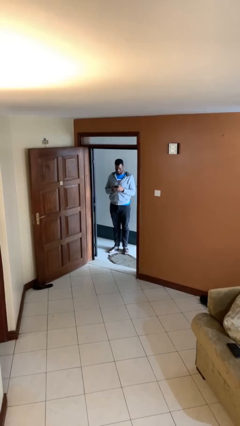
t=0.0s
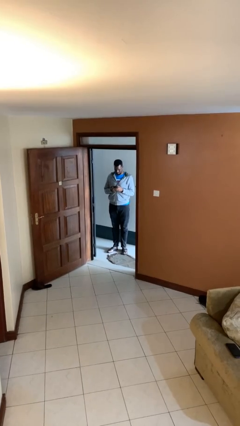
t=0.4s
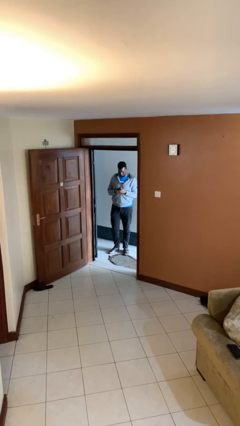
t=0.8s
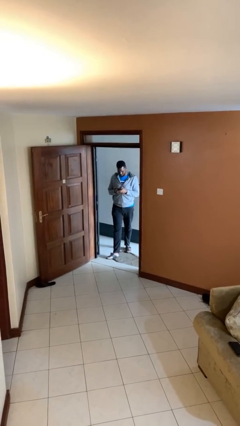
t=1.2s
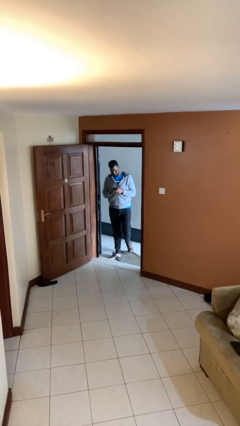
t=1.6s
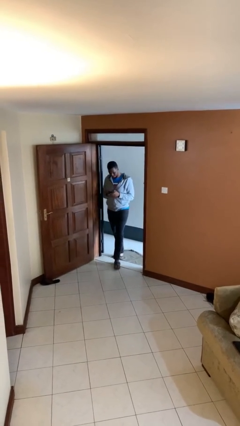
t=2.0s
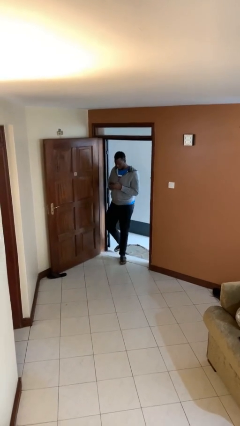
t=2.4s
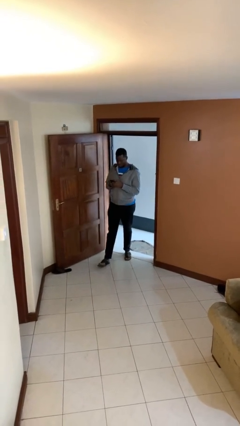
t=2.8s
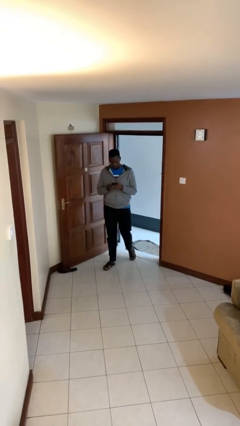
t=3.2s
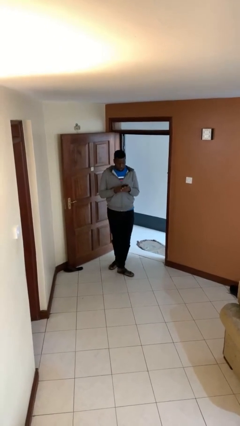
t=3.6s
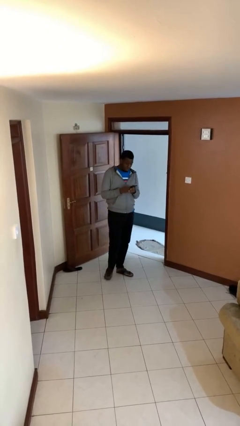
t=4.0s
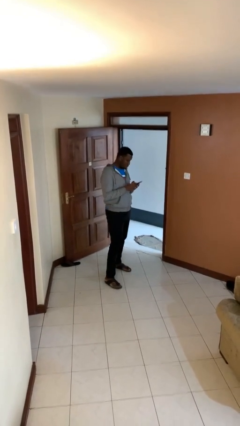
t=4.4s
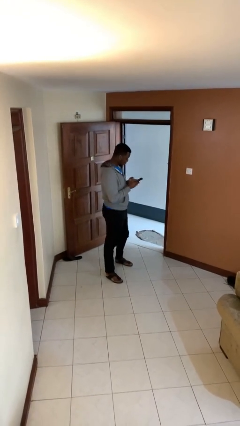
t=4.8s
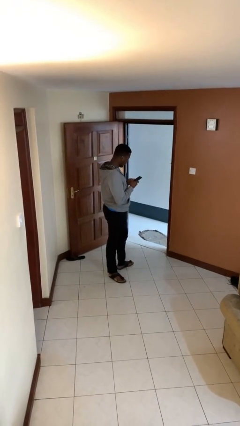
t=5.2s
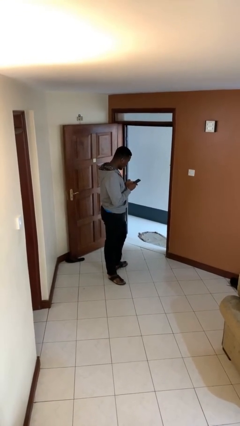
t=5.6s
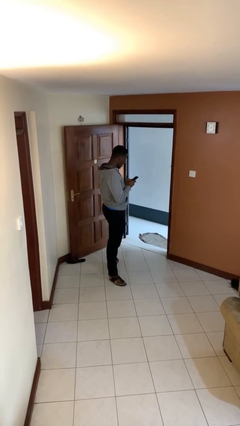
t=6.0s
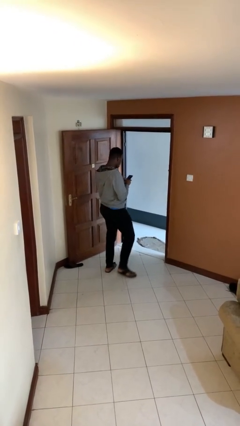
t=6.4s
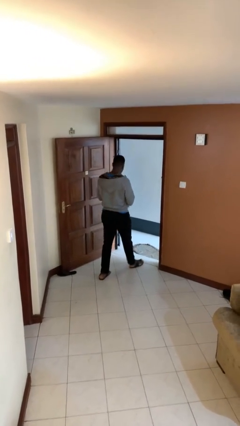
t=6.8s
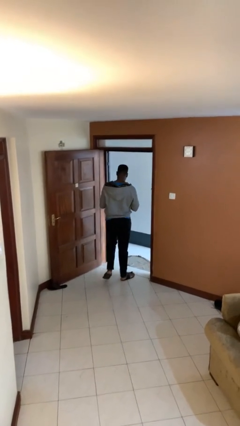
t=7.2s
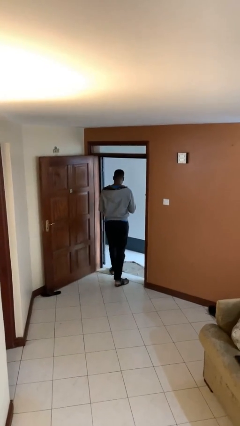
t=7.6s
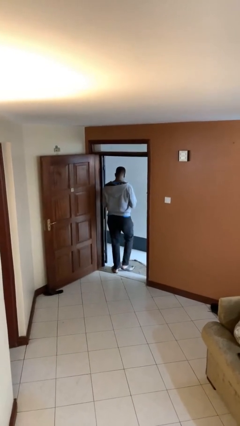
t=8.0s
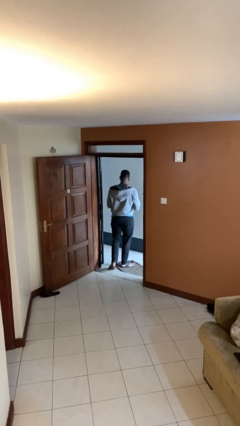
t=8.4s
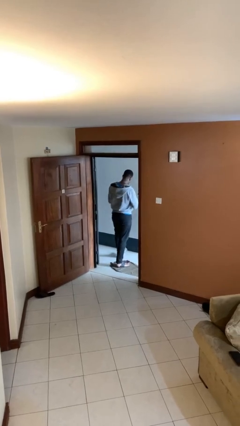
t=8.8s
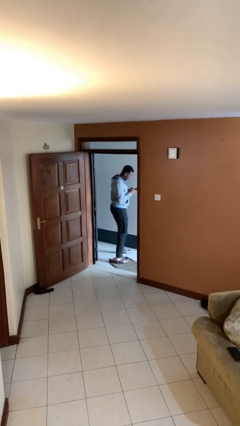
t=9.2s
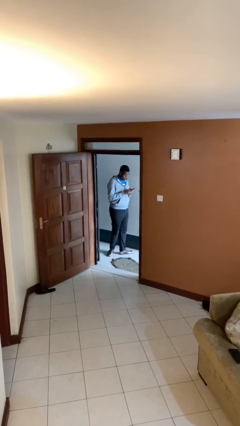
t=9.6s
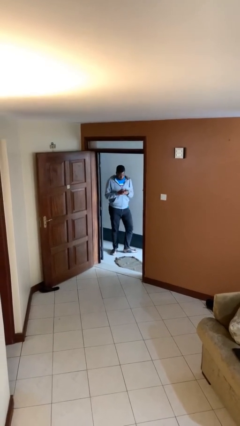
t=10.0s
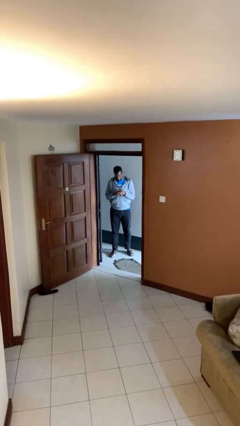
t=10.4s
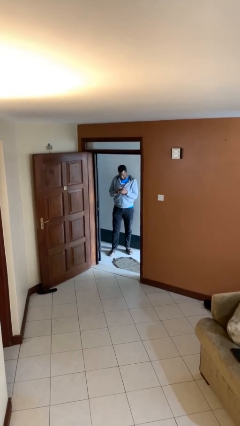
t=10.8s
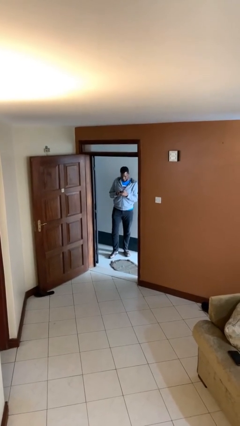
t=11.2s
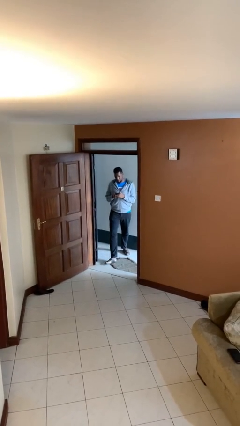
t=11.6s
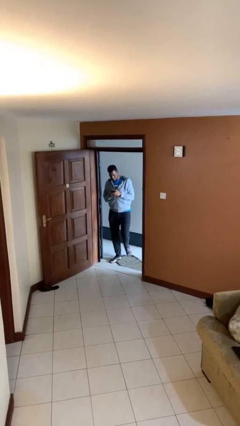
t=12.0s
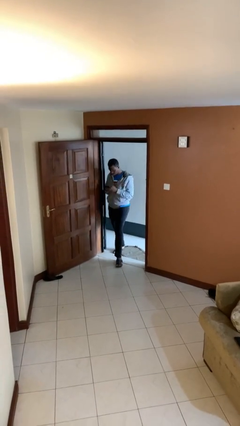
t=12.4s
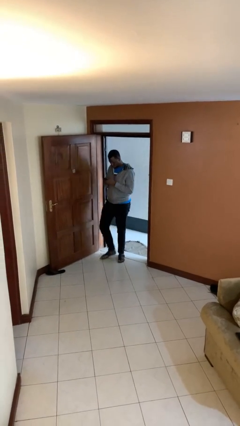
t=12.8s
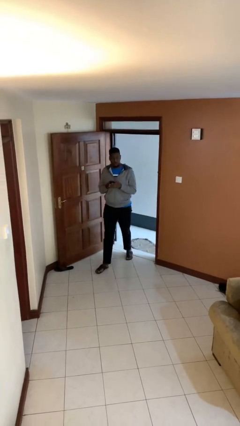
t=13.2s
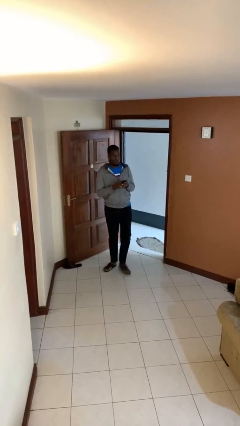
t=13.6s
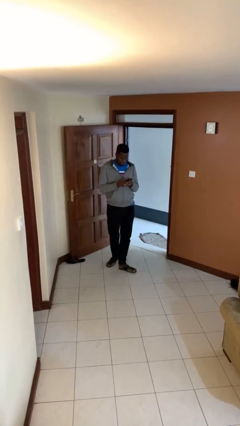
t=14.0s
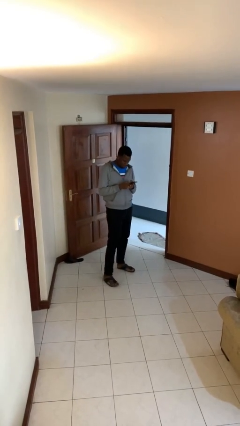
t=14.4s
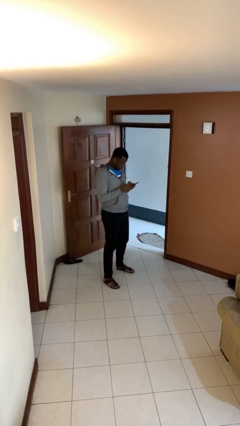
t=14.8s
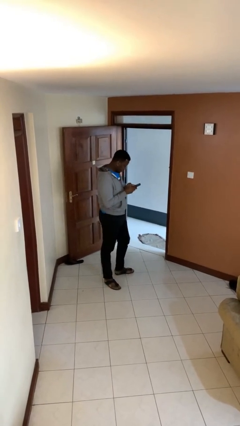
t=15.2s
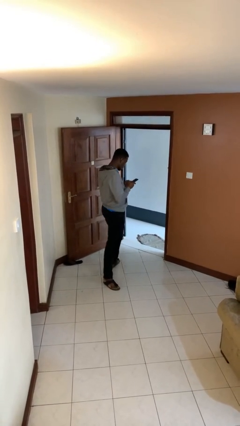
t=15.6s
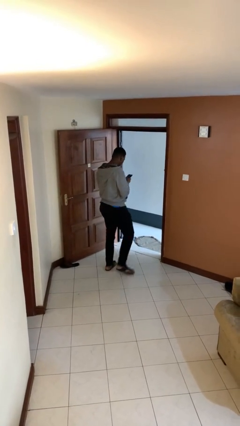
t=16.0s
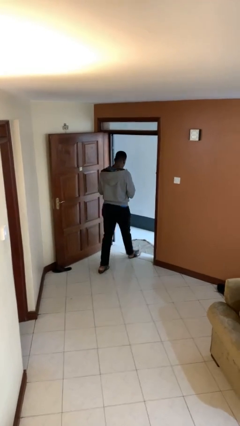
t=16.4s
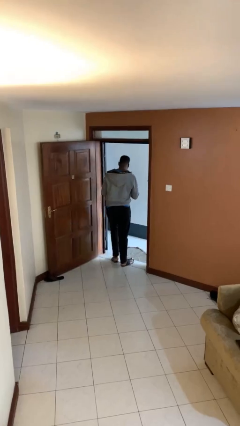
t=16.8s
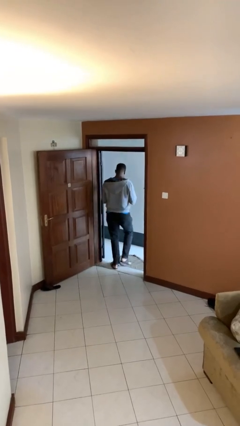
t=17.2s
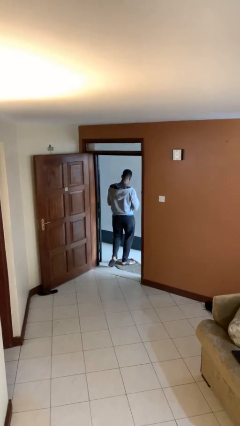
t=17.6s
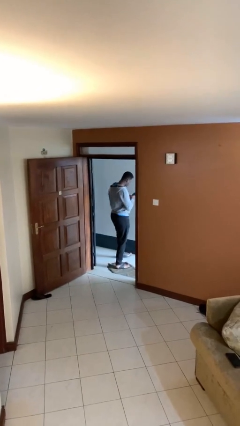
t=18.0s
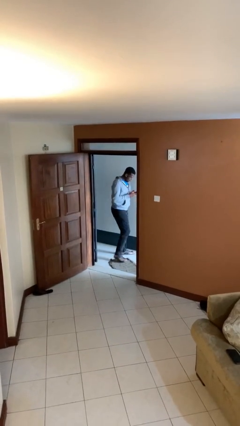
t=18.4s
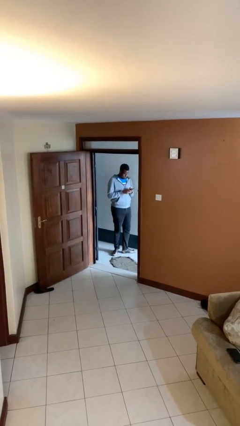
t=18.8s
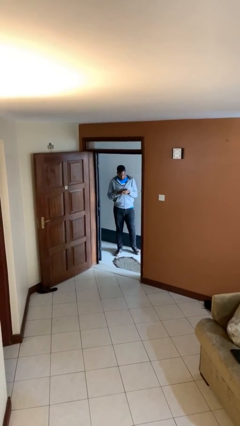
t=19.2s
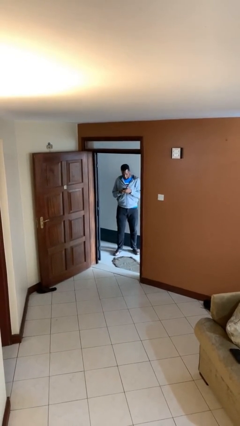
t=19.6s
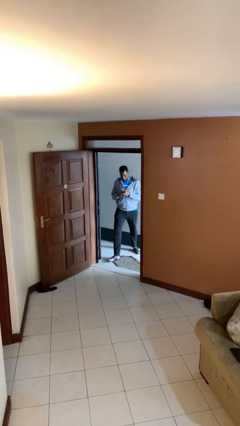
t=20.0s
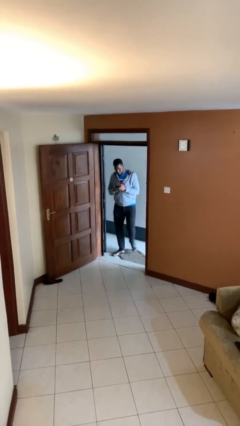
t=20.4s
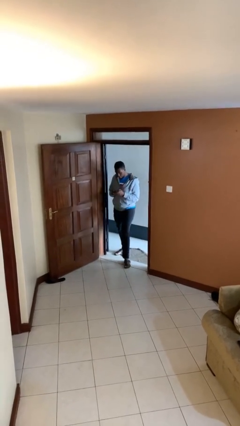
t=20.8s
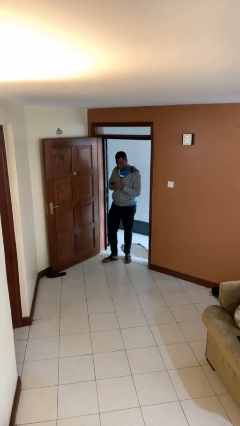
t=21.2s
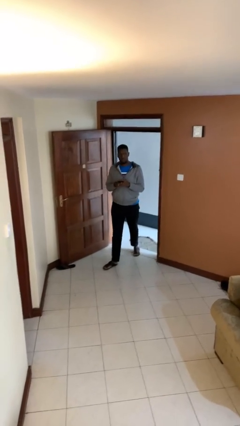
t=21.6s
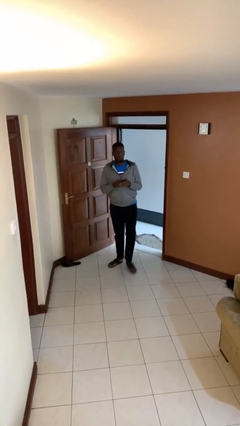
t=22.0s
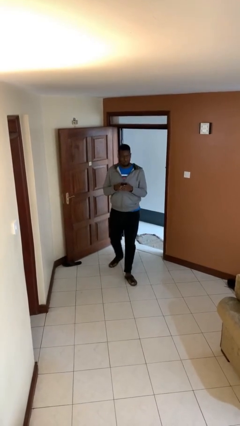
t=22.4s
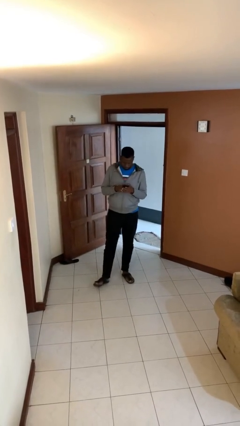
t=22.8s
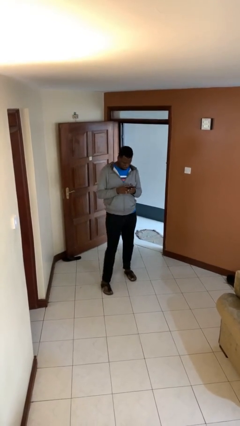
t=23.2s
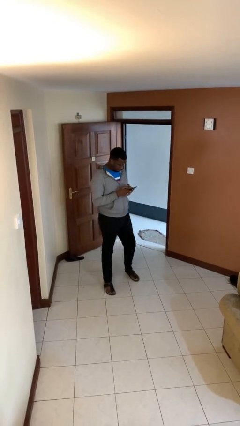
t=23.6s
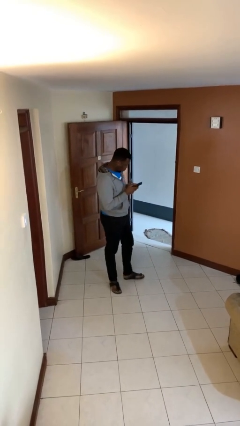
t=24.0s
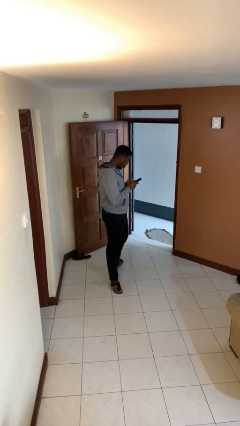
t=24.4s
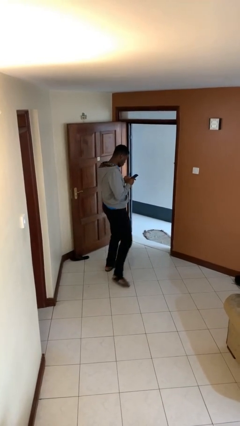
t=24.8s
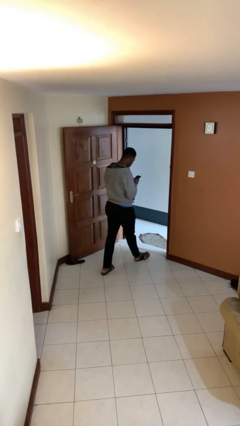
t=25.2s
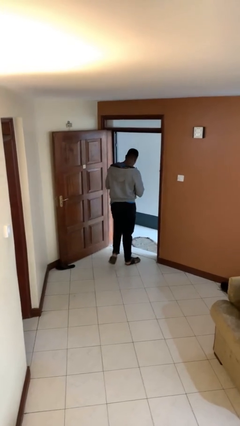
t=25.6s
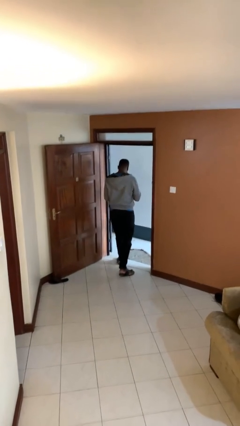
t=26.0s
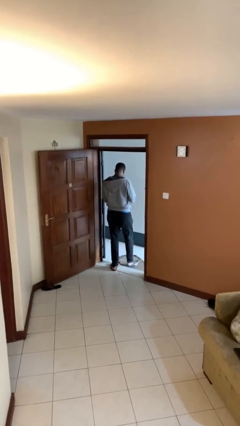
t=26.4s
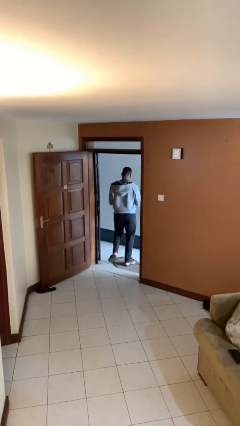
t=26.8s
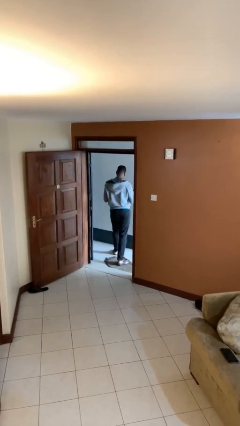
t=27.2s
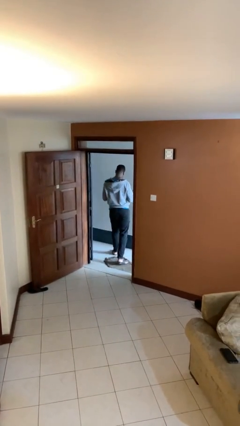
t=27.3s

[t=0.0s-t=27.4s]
person texts on phone

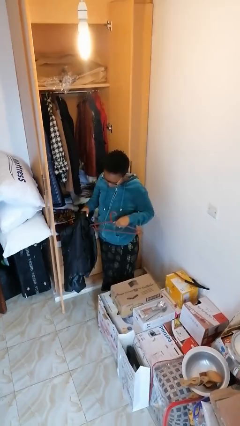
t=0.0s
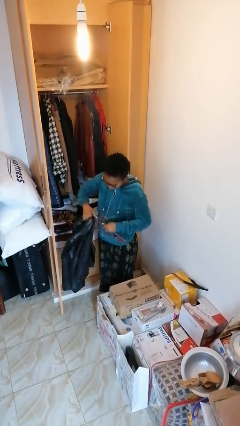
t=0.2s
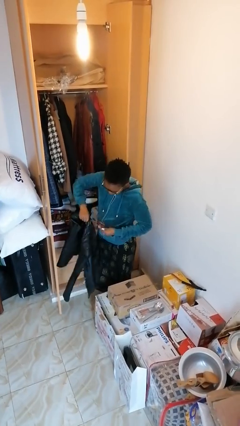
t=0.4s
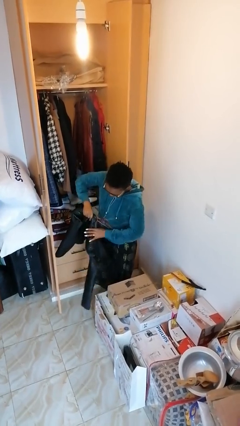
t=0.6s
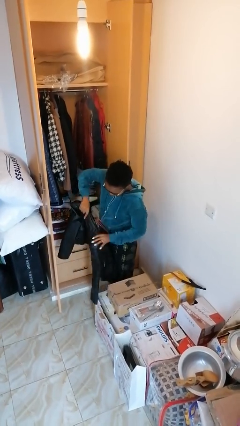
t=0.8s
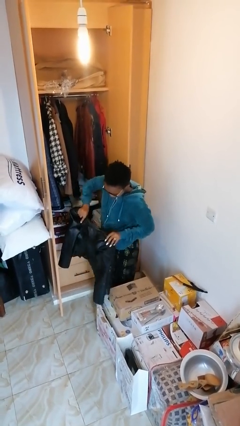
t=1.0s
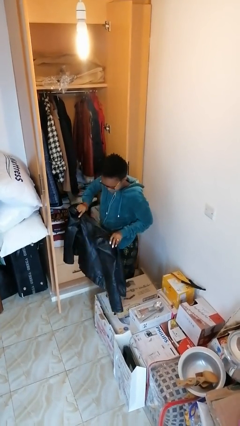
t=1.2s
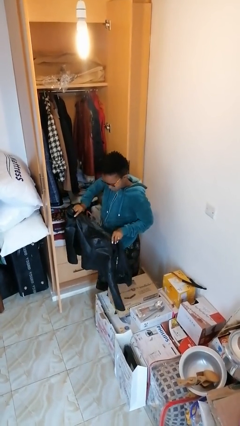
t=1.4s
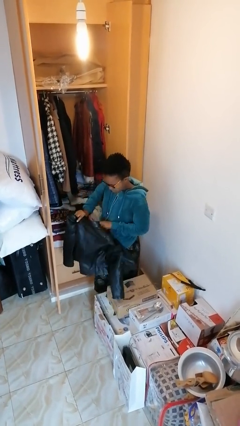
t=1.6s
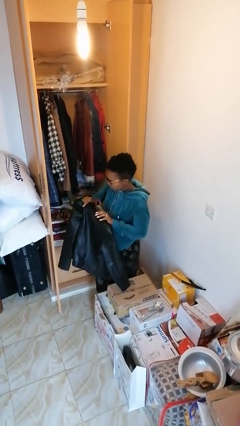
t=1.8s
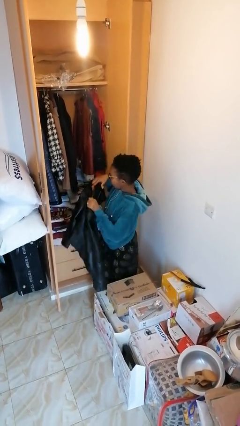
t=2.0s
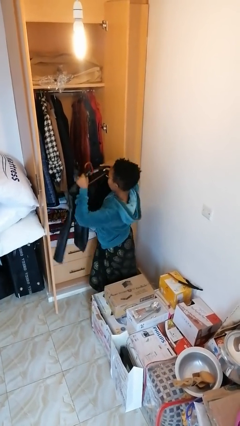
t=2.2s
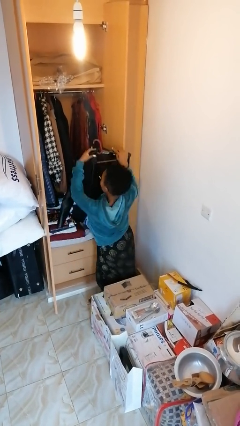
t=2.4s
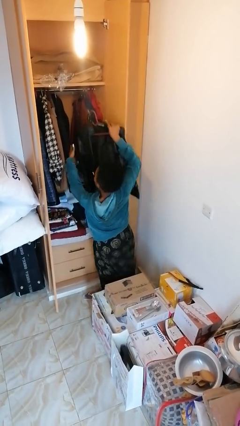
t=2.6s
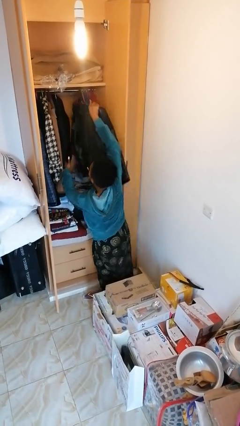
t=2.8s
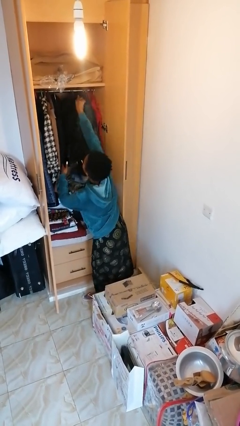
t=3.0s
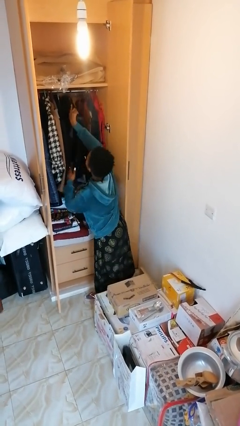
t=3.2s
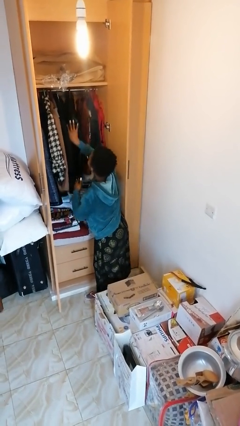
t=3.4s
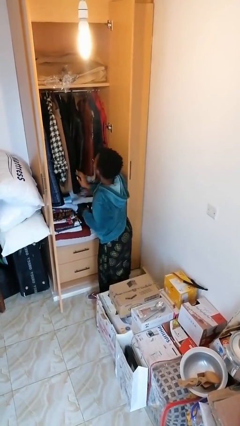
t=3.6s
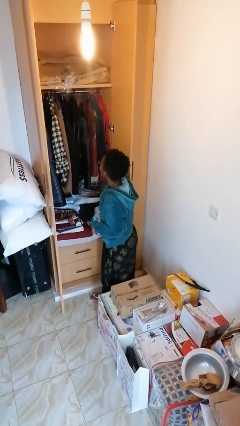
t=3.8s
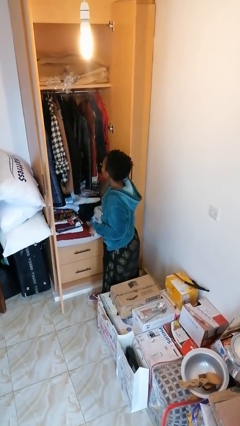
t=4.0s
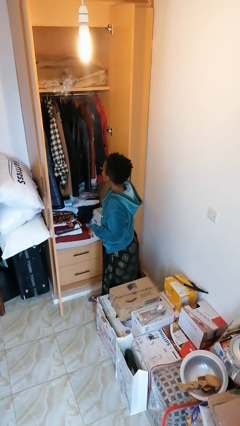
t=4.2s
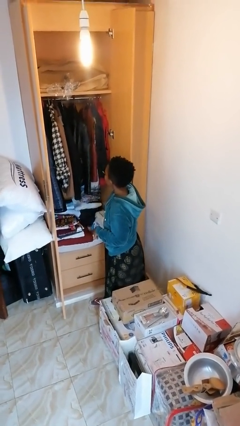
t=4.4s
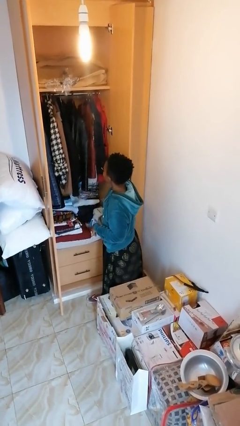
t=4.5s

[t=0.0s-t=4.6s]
person puts clothes into closet
